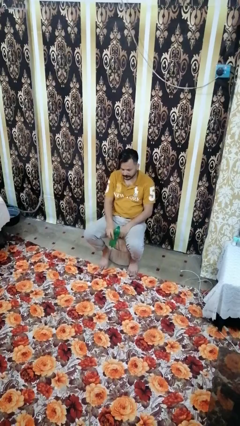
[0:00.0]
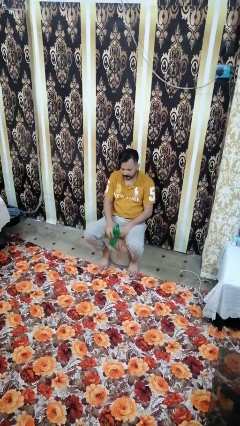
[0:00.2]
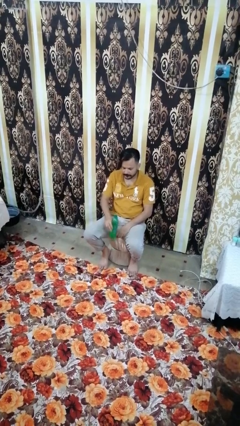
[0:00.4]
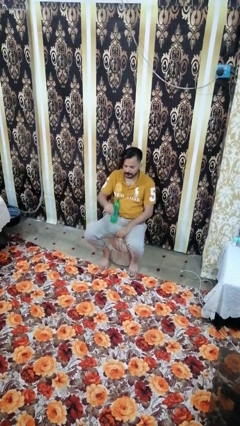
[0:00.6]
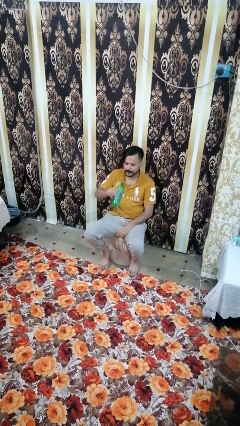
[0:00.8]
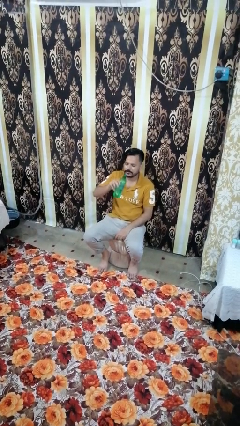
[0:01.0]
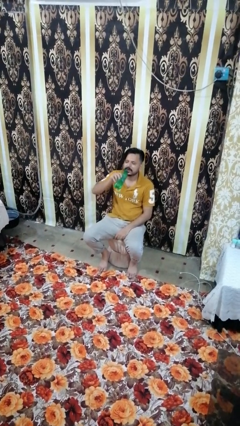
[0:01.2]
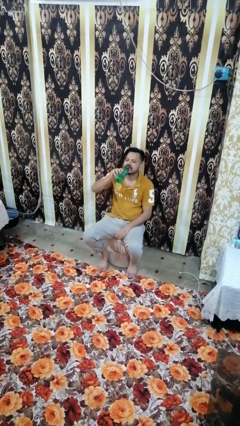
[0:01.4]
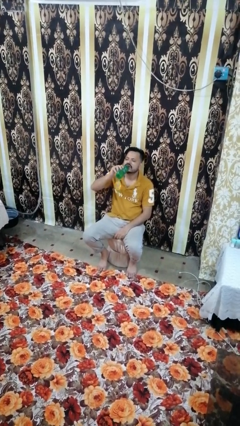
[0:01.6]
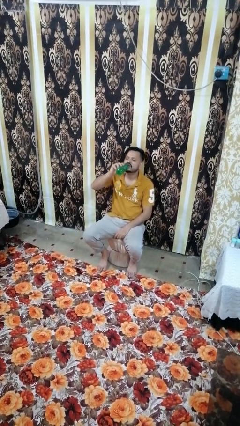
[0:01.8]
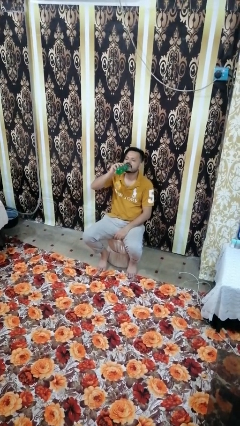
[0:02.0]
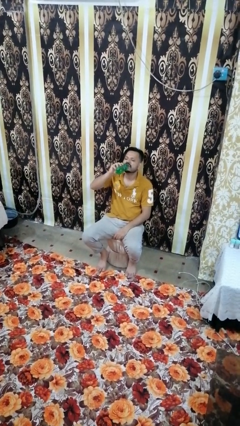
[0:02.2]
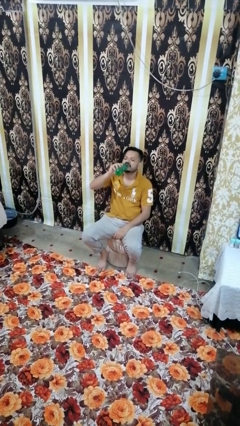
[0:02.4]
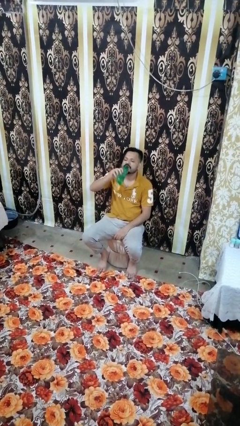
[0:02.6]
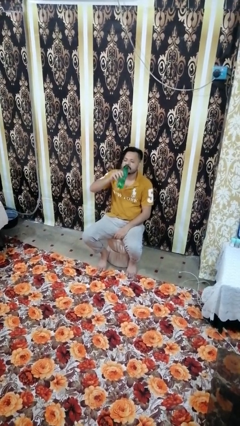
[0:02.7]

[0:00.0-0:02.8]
person drinks from bottle

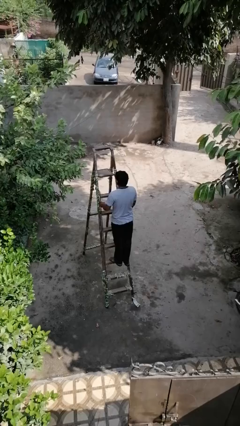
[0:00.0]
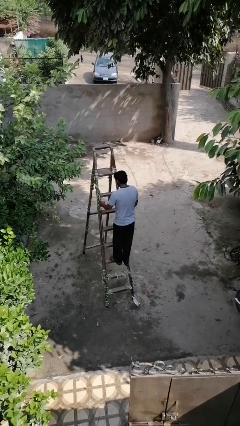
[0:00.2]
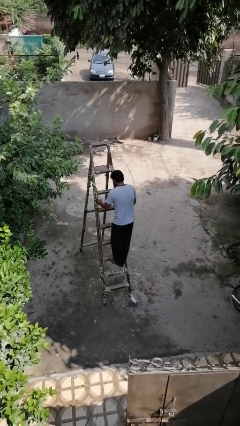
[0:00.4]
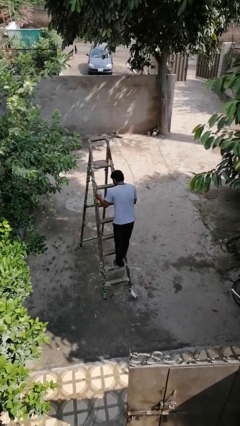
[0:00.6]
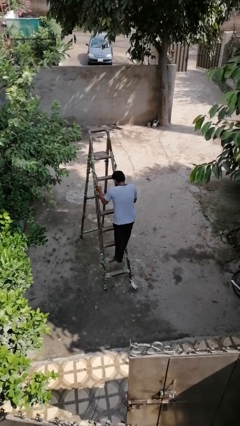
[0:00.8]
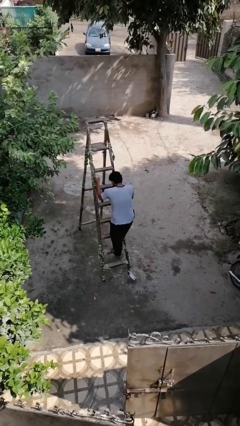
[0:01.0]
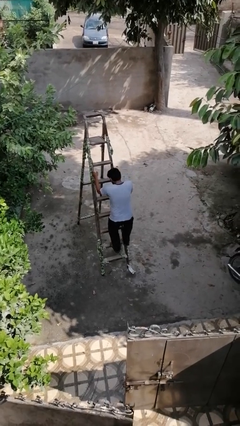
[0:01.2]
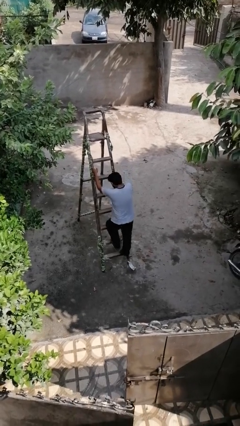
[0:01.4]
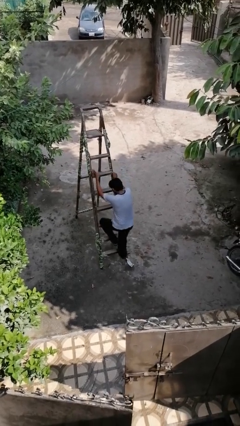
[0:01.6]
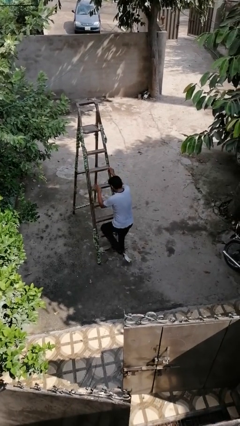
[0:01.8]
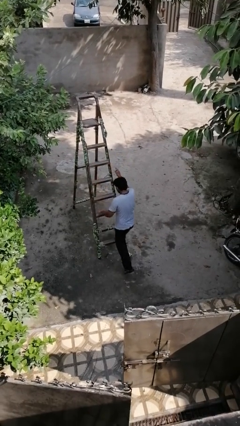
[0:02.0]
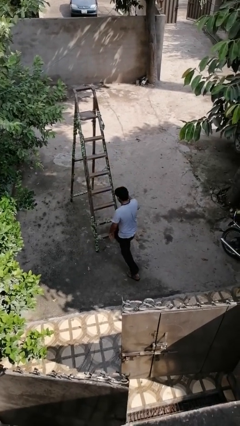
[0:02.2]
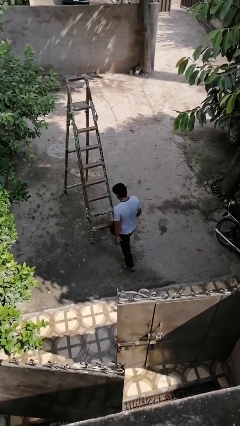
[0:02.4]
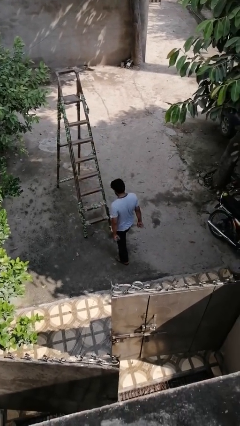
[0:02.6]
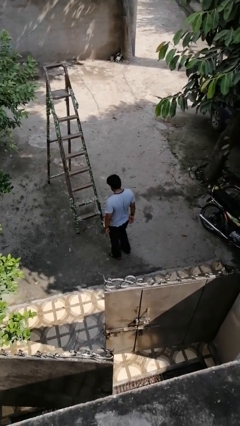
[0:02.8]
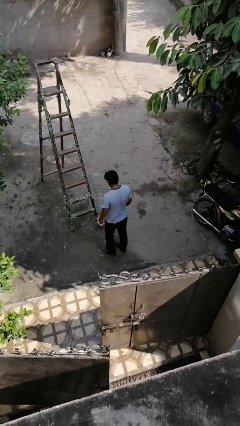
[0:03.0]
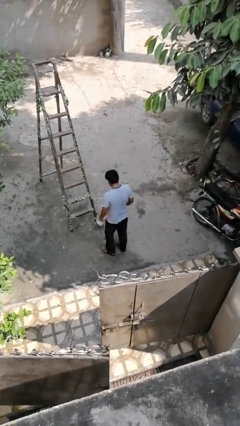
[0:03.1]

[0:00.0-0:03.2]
person climbs down ladder

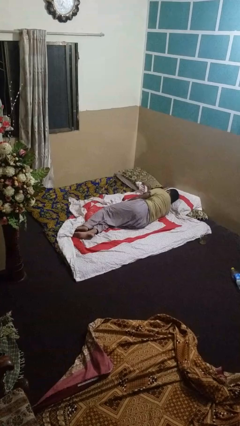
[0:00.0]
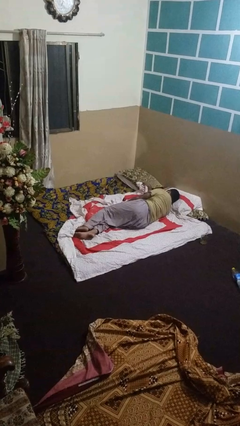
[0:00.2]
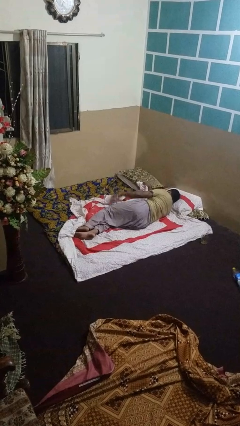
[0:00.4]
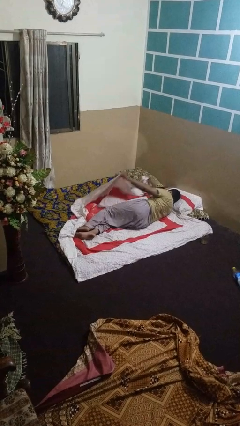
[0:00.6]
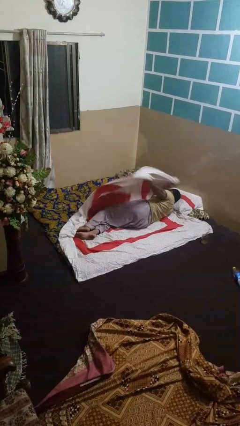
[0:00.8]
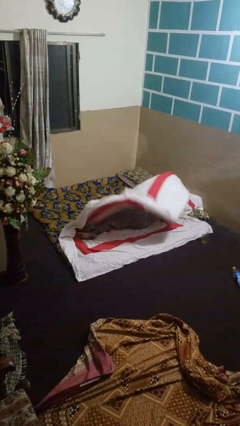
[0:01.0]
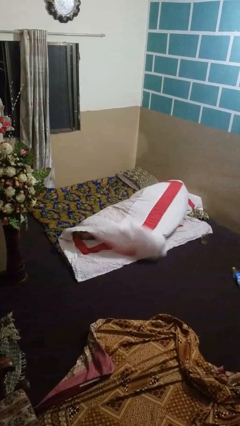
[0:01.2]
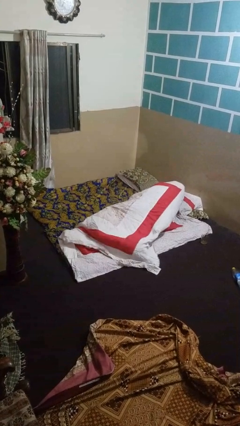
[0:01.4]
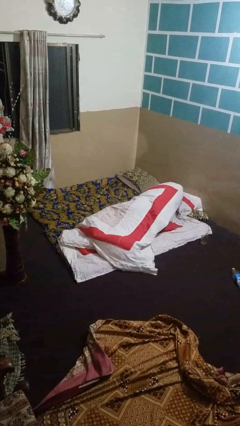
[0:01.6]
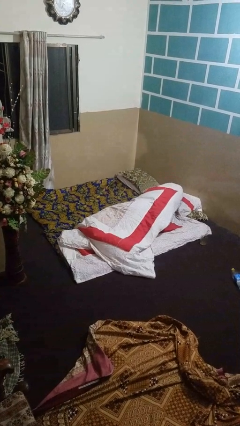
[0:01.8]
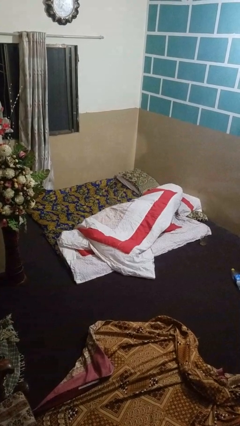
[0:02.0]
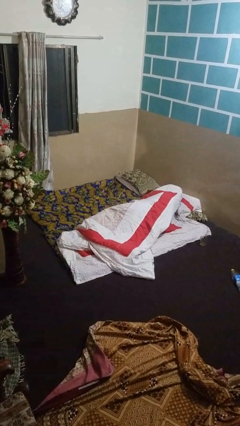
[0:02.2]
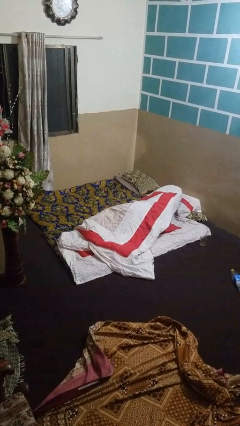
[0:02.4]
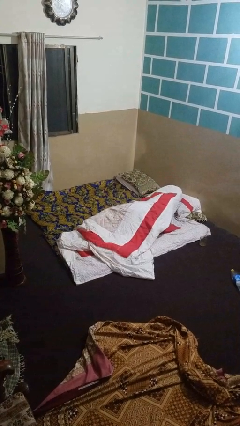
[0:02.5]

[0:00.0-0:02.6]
person covers with bedsheets

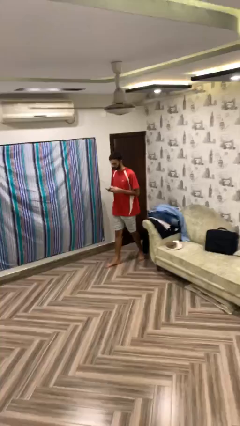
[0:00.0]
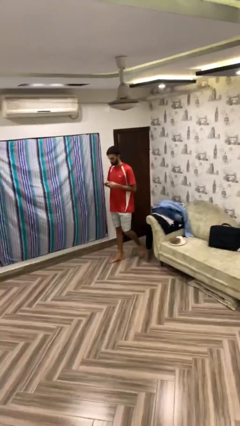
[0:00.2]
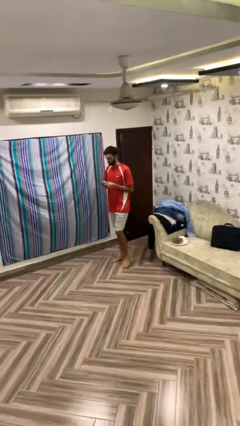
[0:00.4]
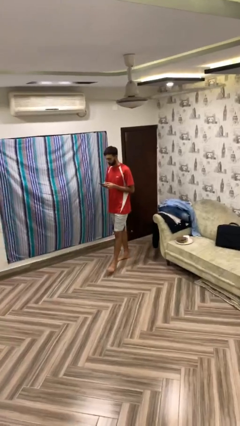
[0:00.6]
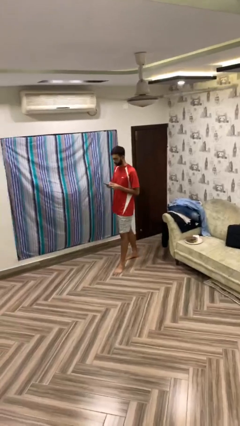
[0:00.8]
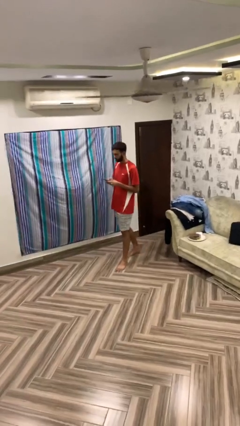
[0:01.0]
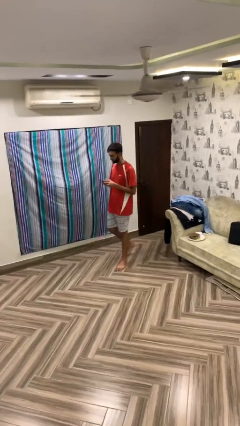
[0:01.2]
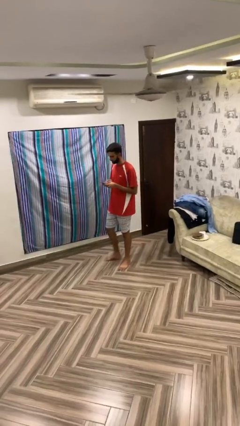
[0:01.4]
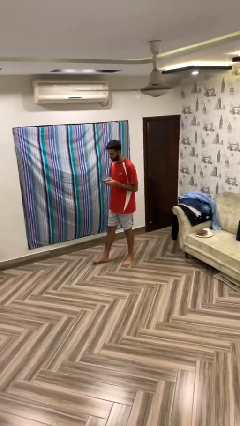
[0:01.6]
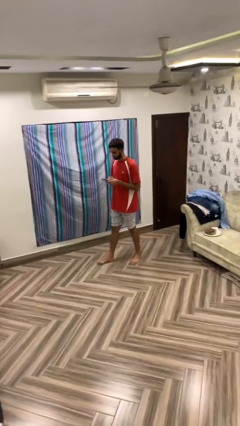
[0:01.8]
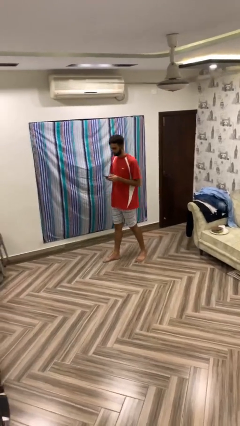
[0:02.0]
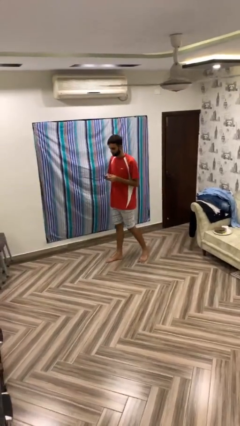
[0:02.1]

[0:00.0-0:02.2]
person texts on phone

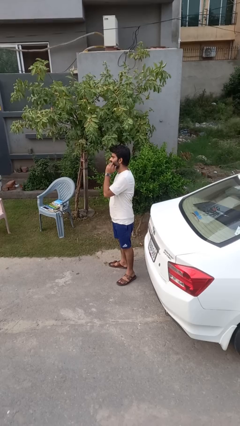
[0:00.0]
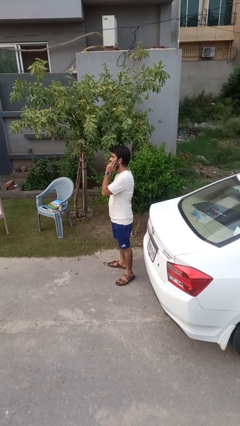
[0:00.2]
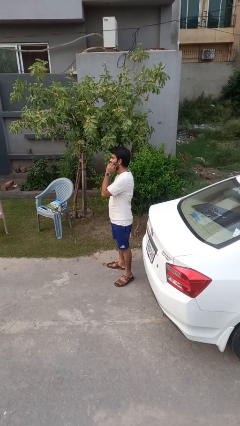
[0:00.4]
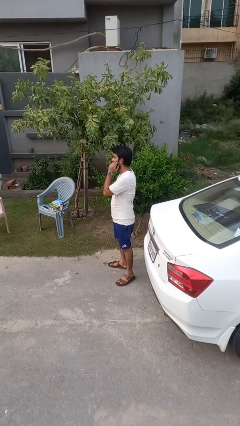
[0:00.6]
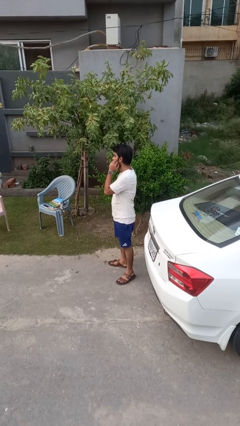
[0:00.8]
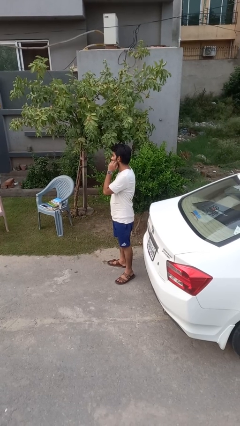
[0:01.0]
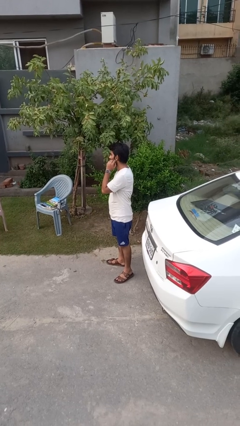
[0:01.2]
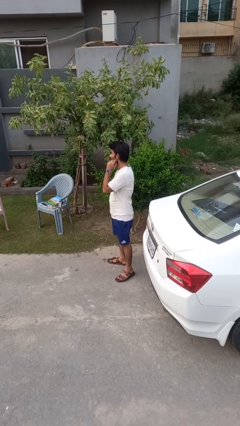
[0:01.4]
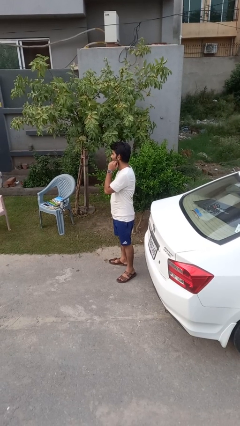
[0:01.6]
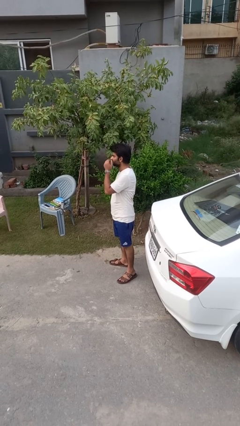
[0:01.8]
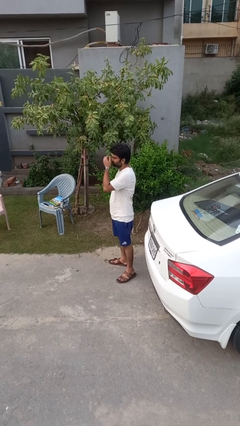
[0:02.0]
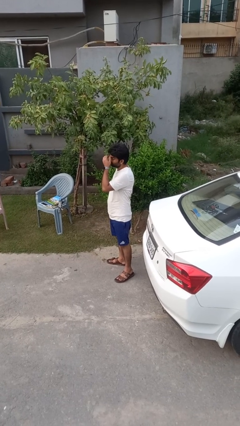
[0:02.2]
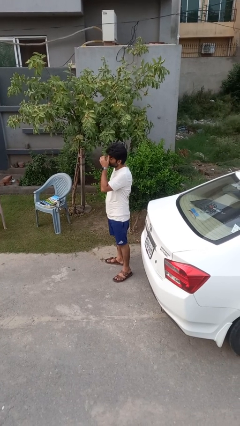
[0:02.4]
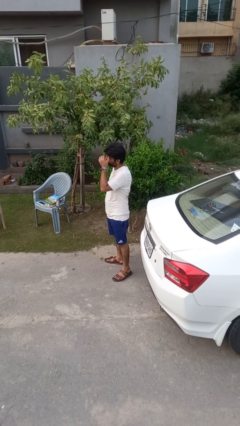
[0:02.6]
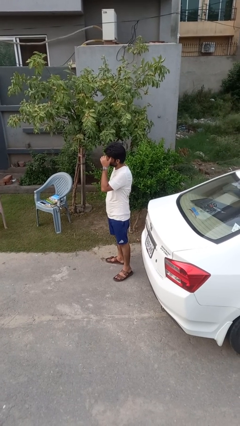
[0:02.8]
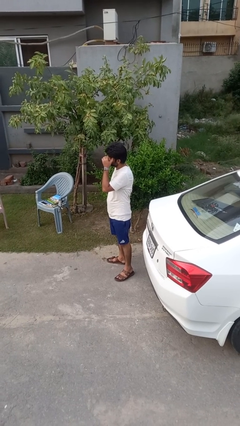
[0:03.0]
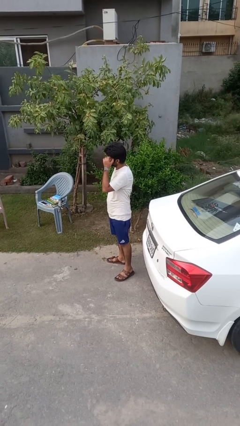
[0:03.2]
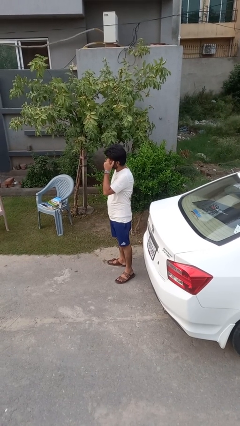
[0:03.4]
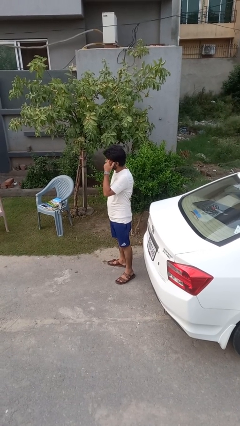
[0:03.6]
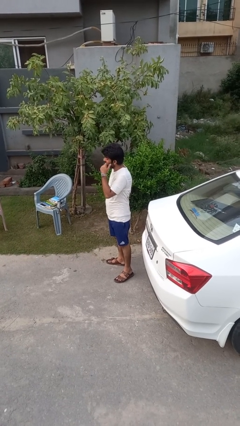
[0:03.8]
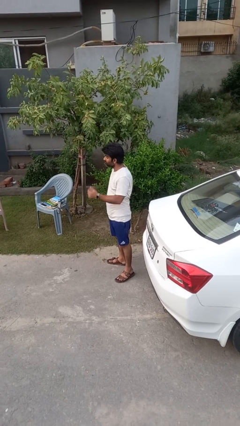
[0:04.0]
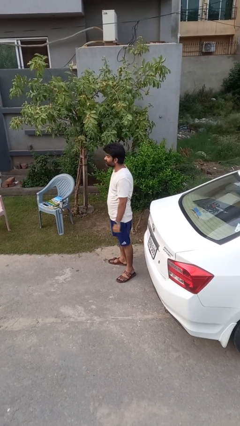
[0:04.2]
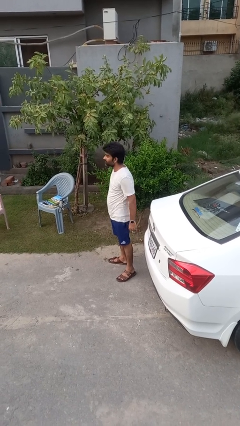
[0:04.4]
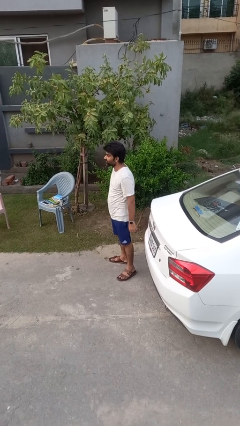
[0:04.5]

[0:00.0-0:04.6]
person scratches face

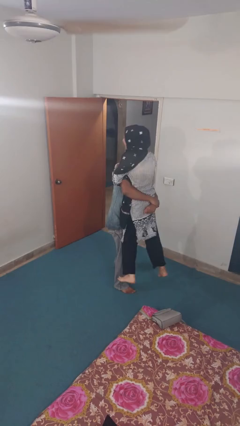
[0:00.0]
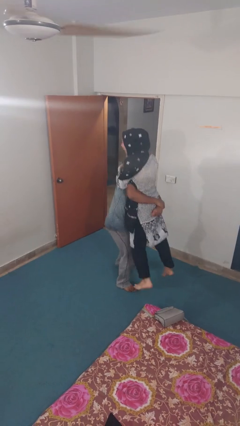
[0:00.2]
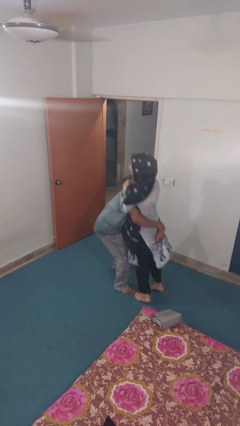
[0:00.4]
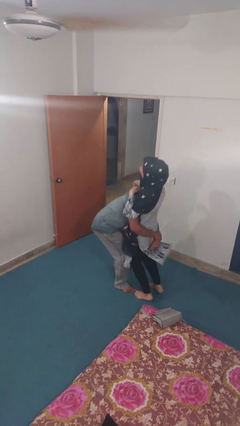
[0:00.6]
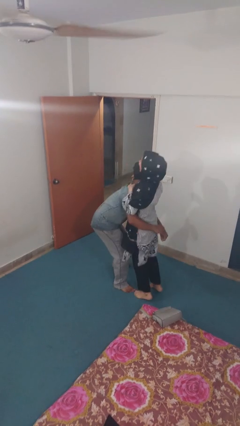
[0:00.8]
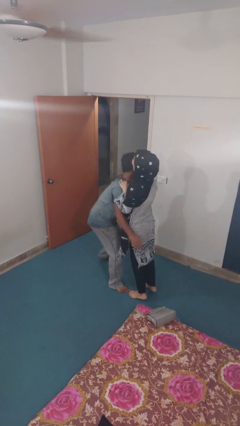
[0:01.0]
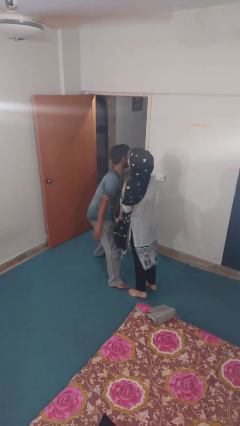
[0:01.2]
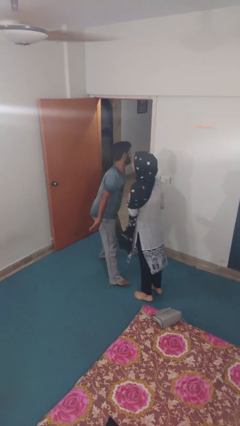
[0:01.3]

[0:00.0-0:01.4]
person puts down person

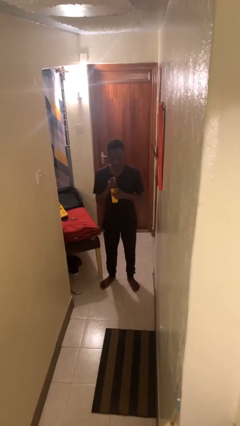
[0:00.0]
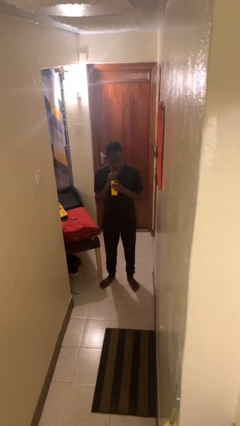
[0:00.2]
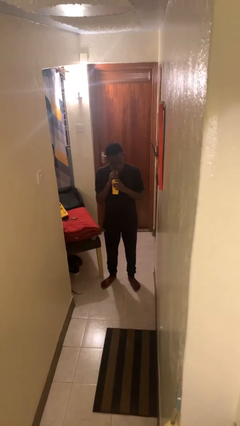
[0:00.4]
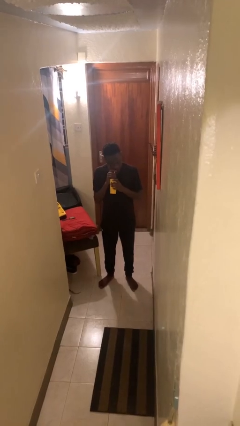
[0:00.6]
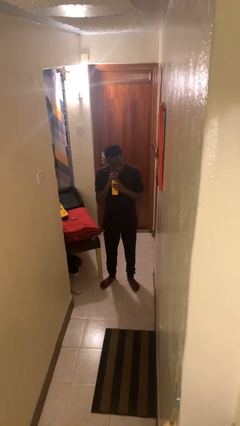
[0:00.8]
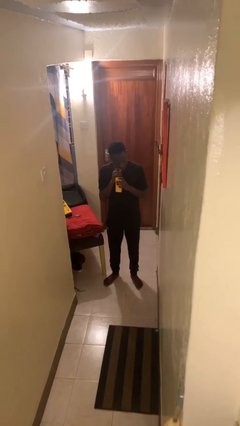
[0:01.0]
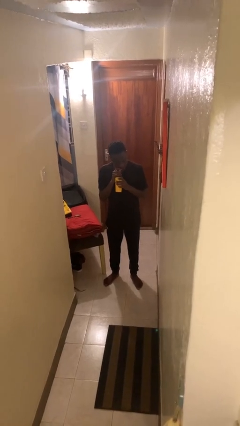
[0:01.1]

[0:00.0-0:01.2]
person drinks from straw
